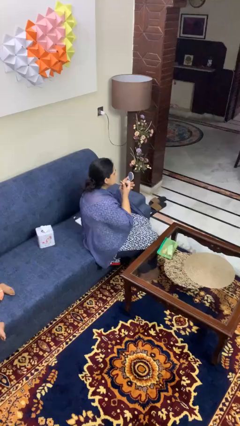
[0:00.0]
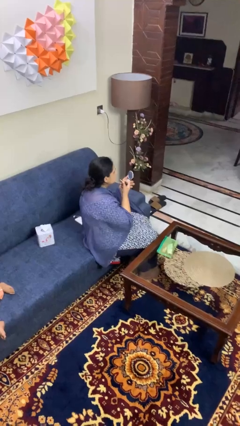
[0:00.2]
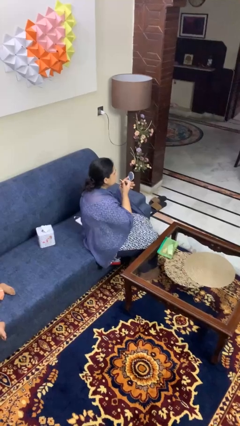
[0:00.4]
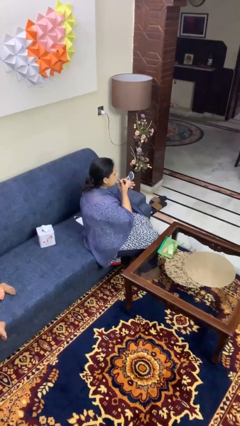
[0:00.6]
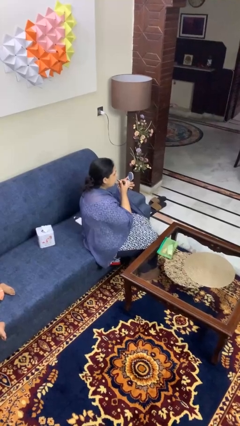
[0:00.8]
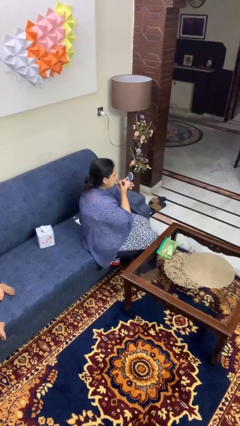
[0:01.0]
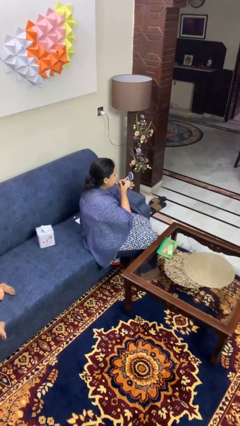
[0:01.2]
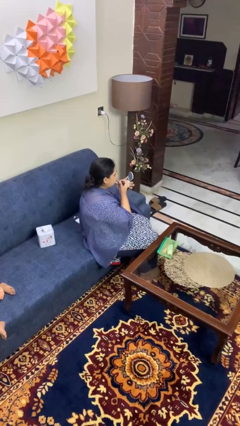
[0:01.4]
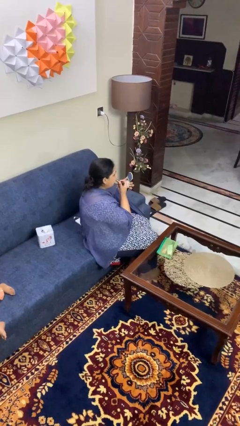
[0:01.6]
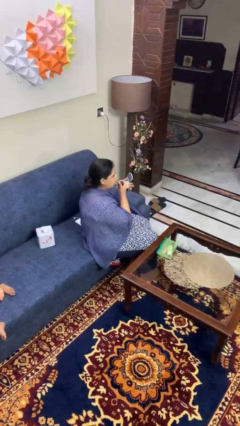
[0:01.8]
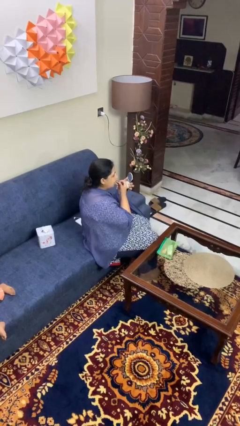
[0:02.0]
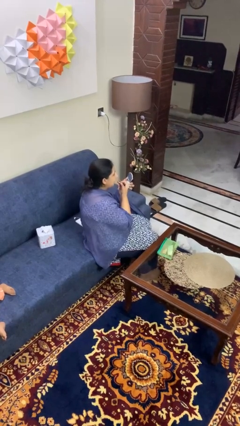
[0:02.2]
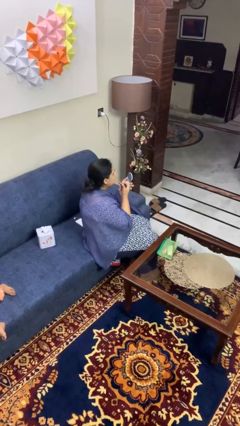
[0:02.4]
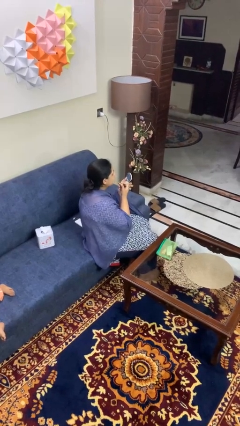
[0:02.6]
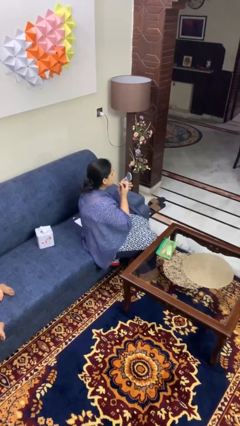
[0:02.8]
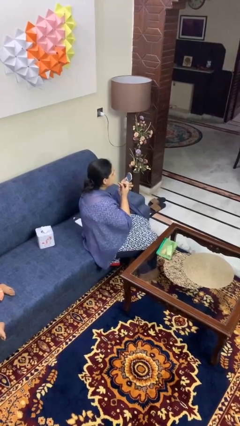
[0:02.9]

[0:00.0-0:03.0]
person applies lip makeup

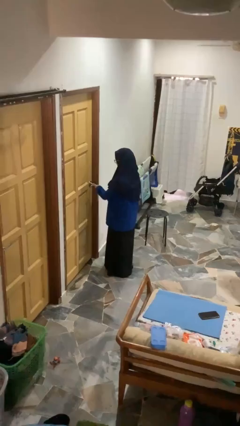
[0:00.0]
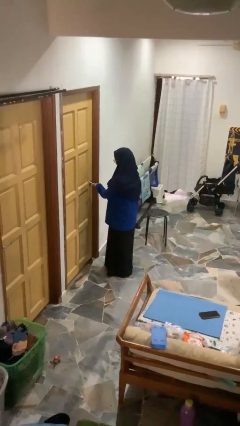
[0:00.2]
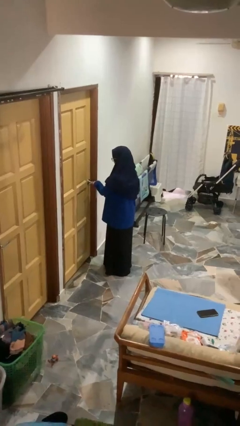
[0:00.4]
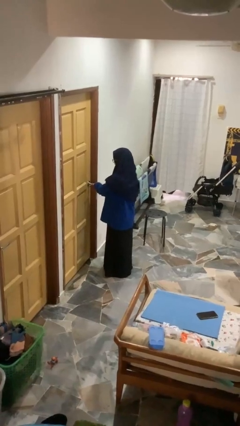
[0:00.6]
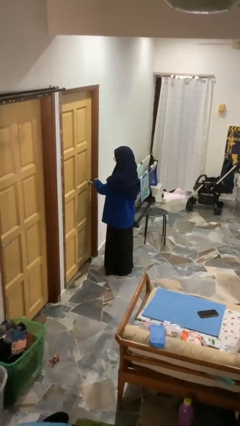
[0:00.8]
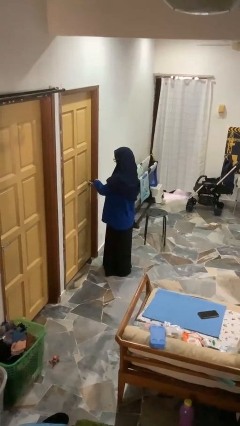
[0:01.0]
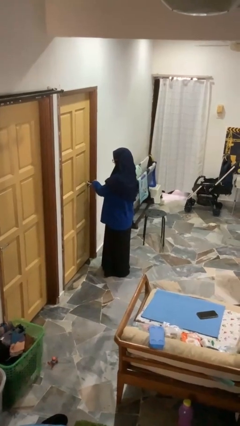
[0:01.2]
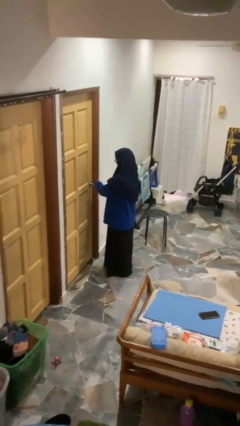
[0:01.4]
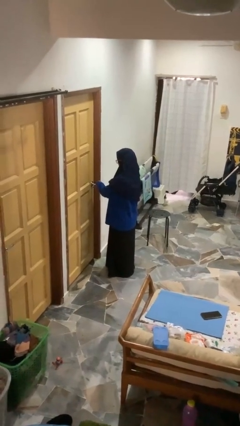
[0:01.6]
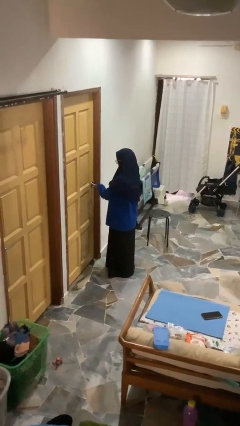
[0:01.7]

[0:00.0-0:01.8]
person locks door with keys

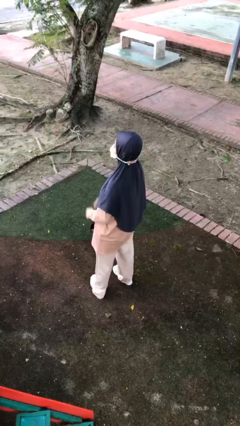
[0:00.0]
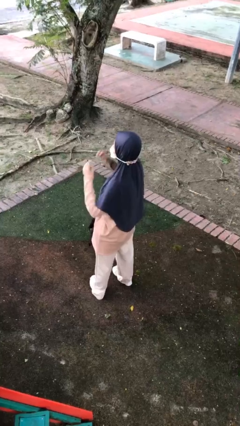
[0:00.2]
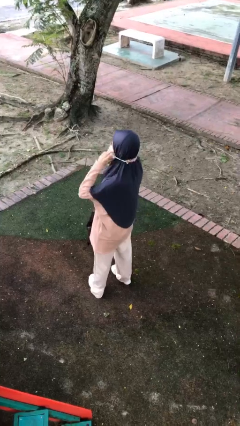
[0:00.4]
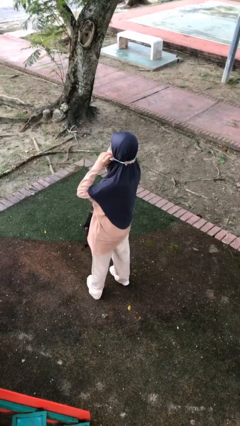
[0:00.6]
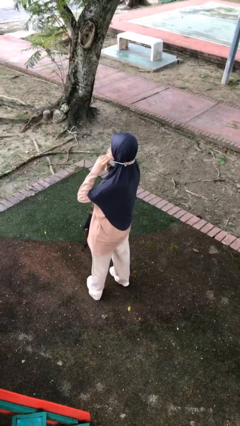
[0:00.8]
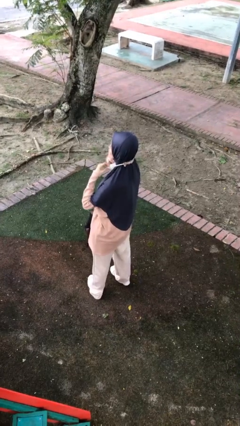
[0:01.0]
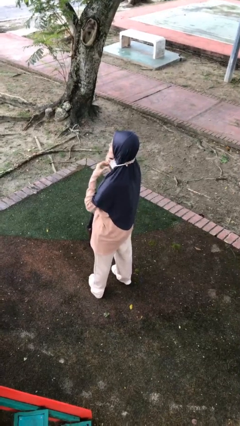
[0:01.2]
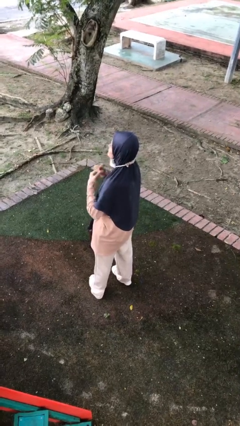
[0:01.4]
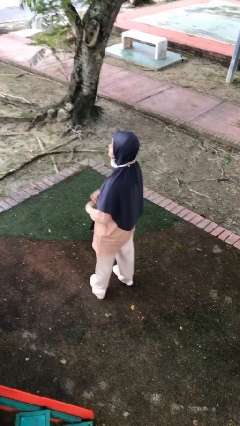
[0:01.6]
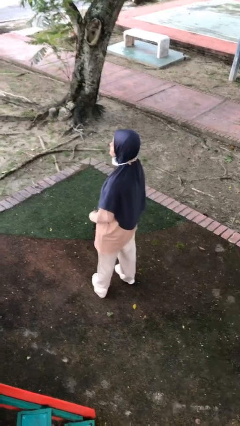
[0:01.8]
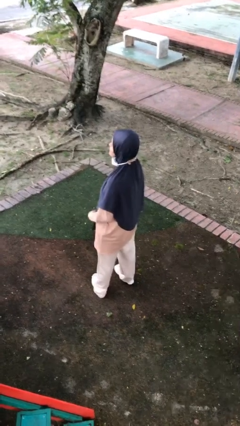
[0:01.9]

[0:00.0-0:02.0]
person takes off facemask

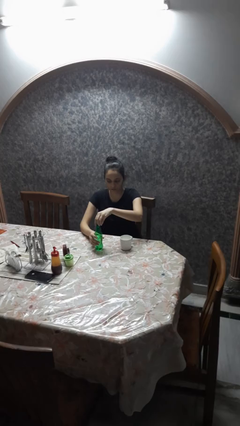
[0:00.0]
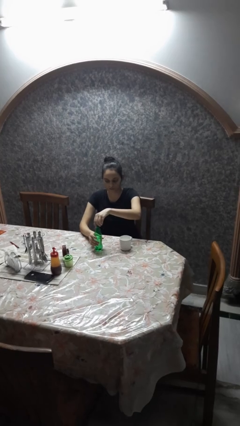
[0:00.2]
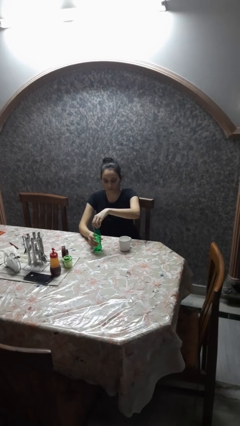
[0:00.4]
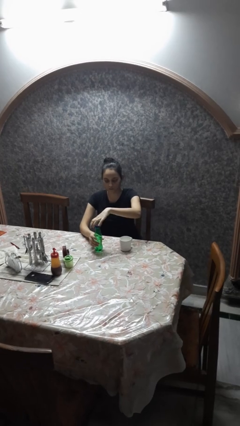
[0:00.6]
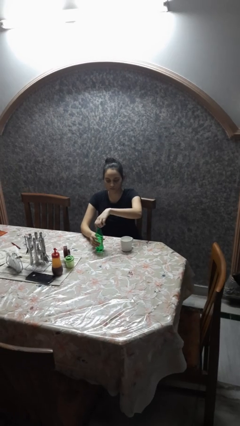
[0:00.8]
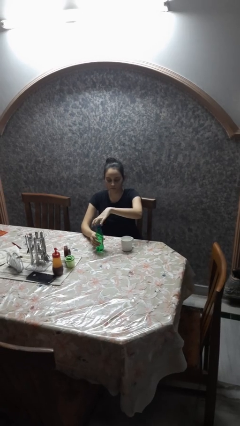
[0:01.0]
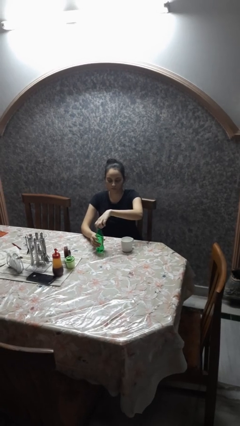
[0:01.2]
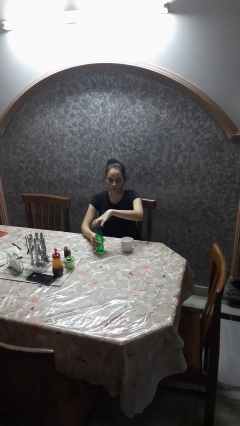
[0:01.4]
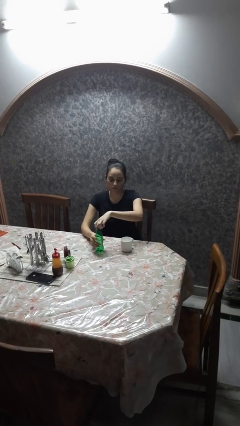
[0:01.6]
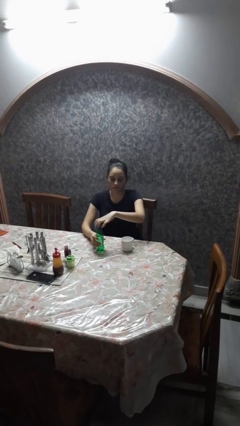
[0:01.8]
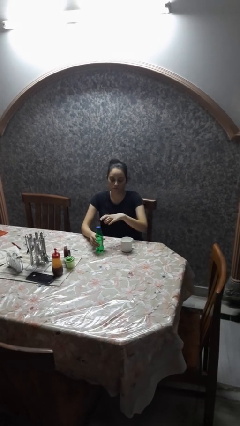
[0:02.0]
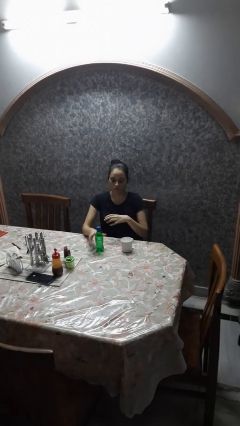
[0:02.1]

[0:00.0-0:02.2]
person screws lid to bottle

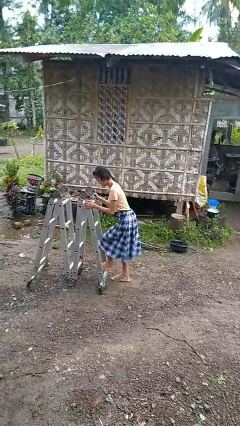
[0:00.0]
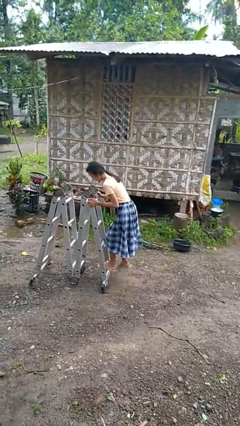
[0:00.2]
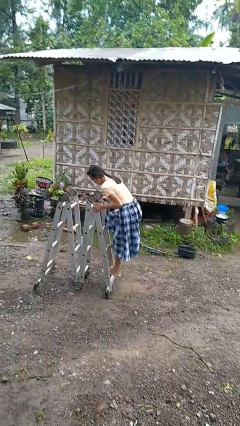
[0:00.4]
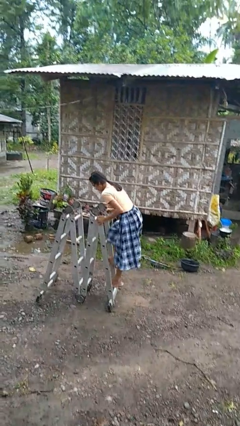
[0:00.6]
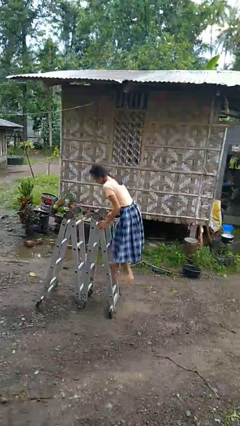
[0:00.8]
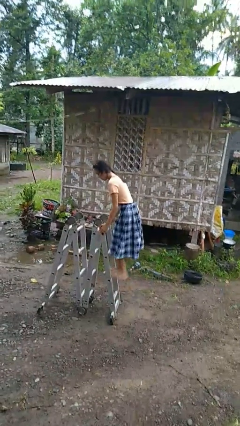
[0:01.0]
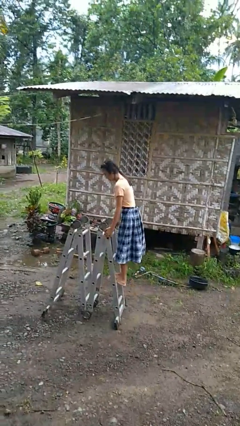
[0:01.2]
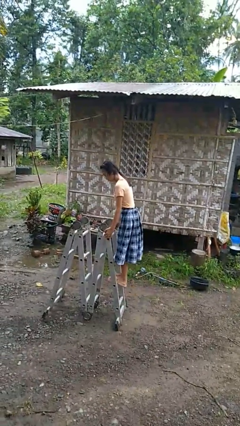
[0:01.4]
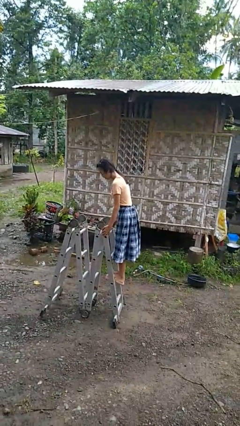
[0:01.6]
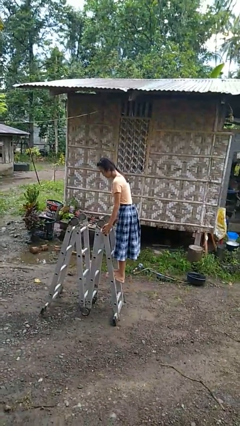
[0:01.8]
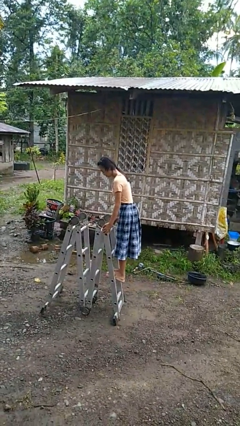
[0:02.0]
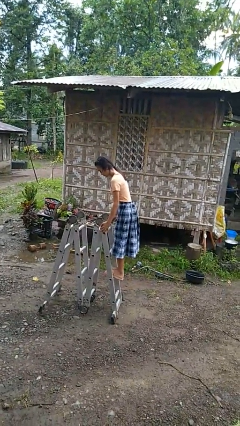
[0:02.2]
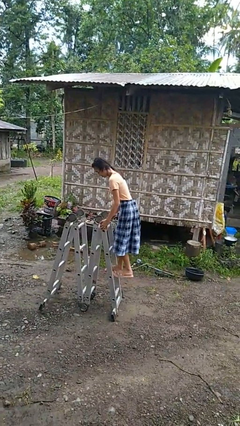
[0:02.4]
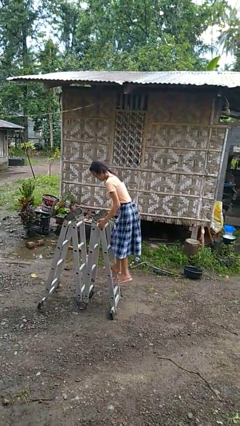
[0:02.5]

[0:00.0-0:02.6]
person climbs up ladder

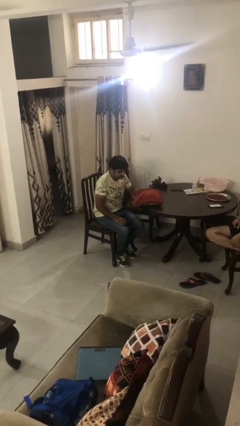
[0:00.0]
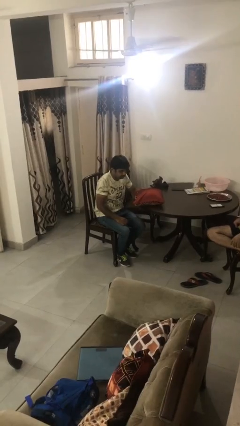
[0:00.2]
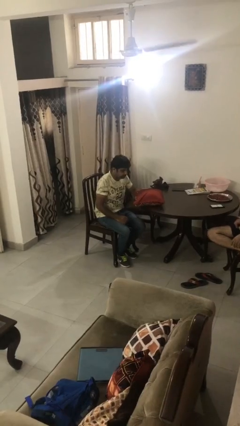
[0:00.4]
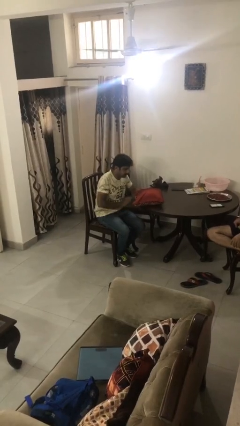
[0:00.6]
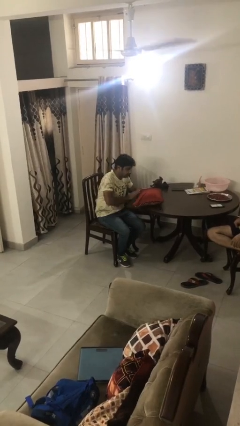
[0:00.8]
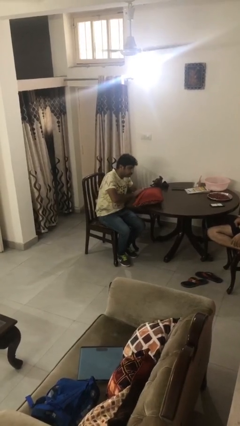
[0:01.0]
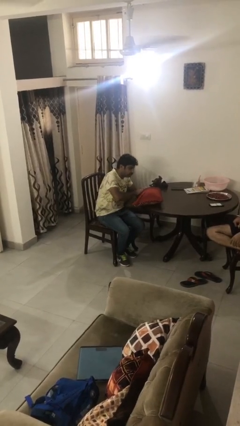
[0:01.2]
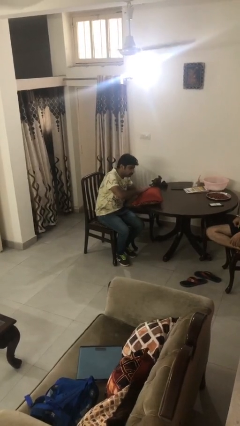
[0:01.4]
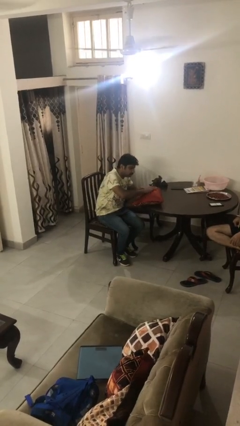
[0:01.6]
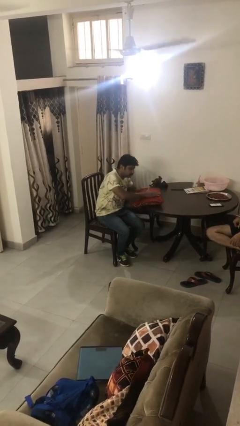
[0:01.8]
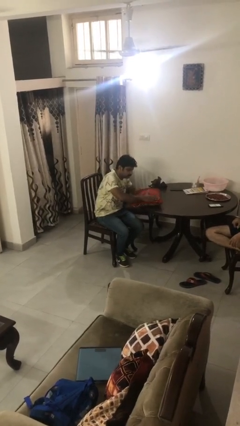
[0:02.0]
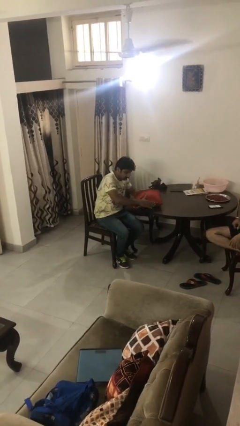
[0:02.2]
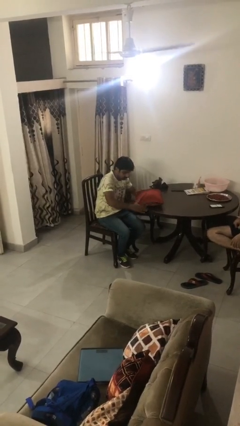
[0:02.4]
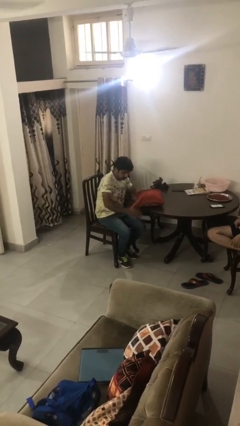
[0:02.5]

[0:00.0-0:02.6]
person waves hand over object

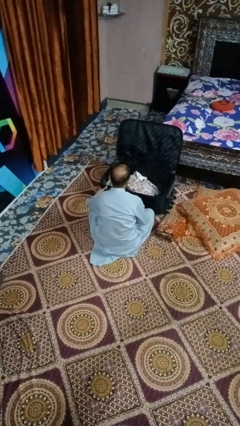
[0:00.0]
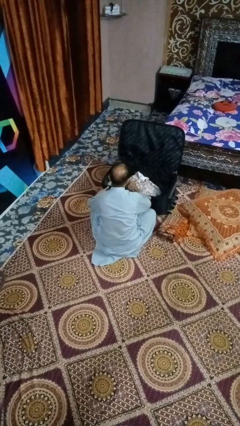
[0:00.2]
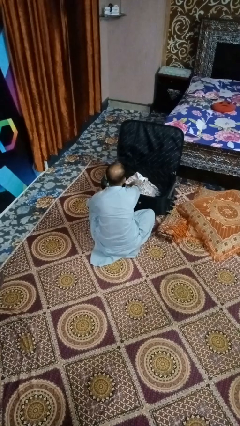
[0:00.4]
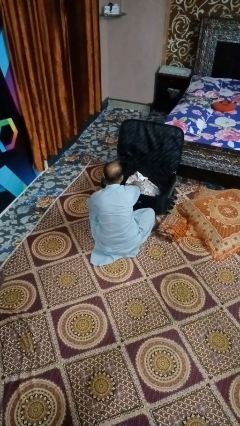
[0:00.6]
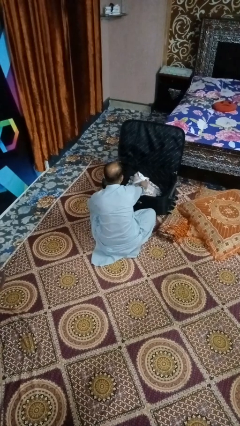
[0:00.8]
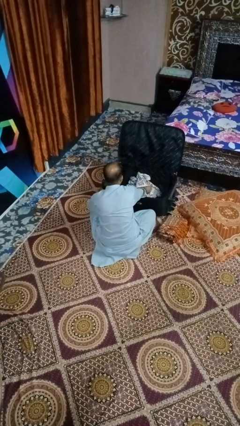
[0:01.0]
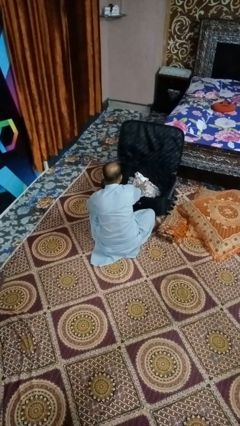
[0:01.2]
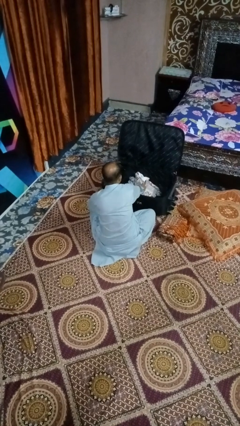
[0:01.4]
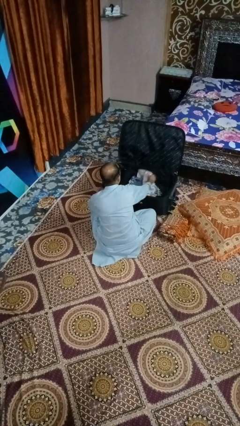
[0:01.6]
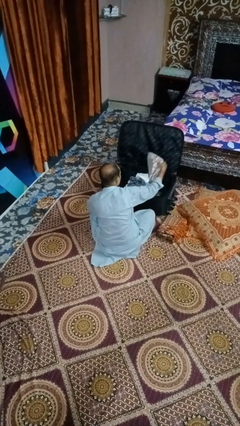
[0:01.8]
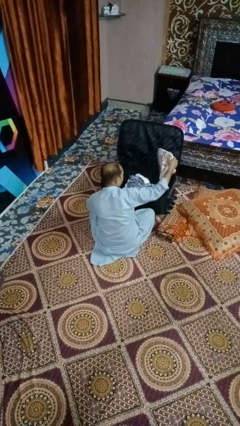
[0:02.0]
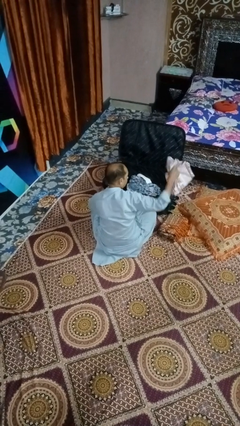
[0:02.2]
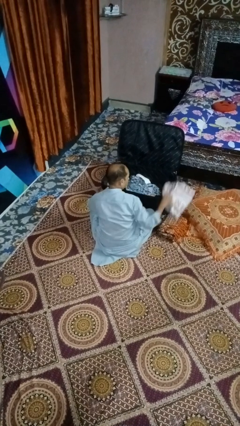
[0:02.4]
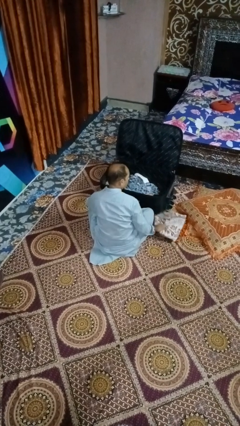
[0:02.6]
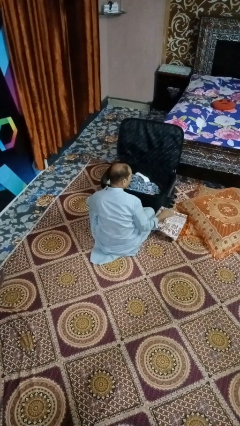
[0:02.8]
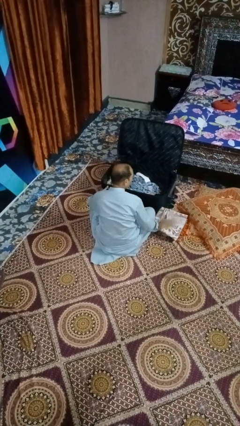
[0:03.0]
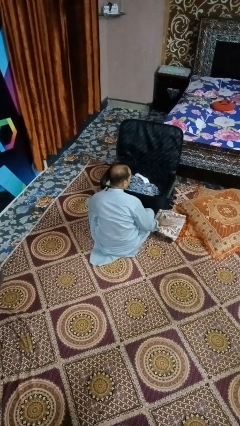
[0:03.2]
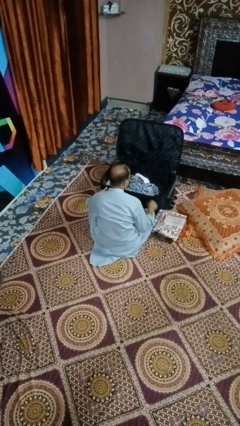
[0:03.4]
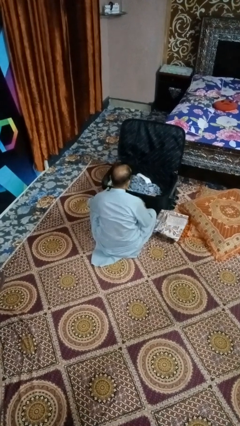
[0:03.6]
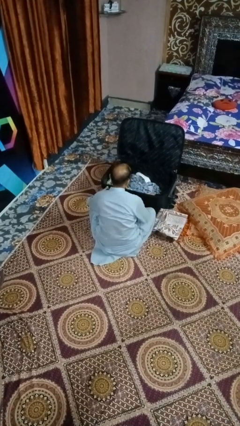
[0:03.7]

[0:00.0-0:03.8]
person unloads clothes from suitcase
